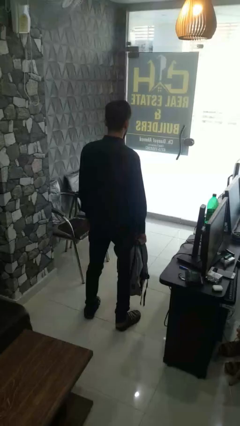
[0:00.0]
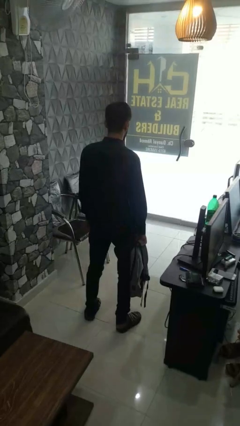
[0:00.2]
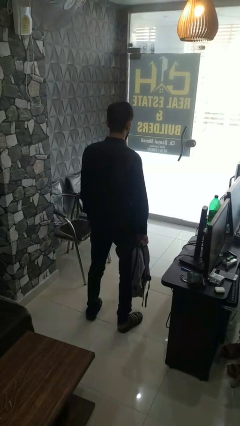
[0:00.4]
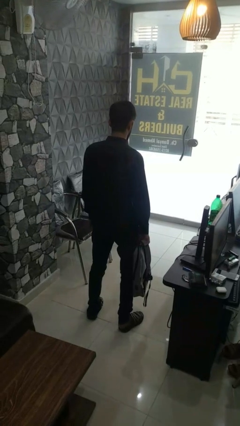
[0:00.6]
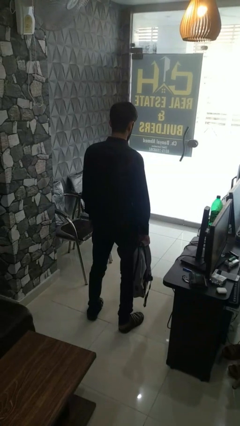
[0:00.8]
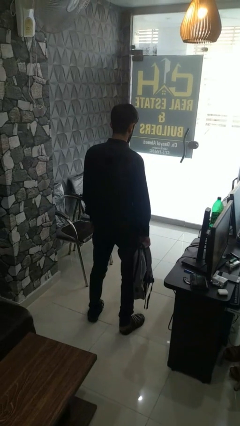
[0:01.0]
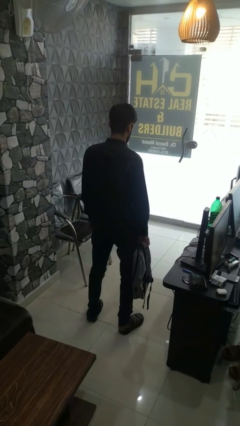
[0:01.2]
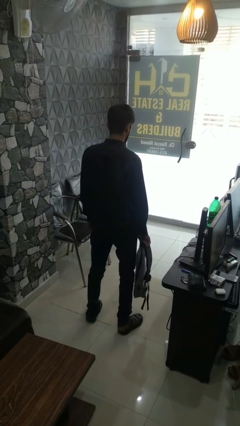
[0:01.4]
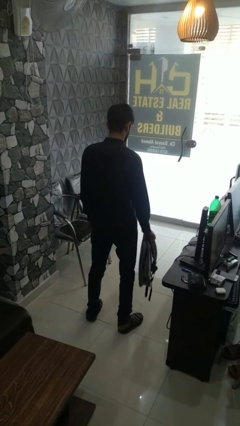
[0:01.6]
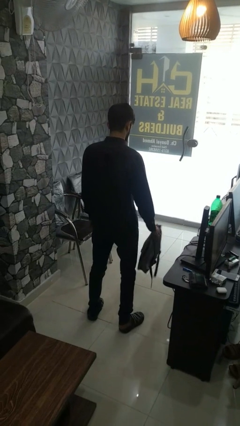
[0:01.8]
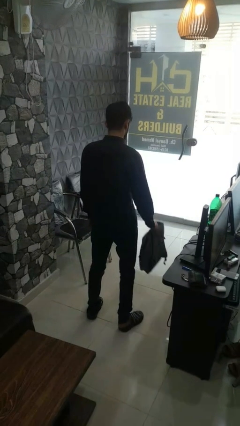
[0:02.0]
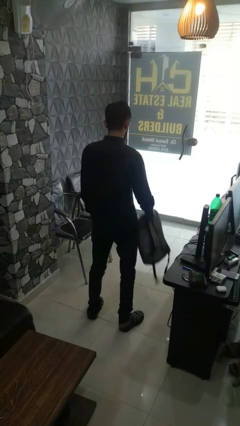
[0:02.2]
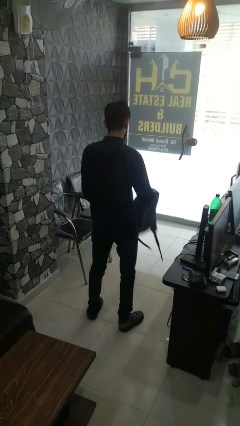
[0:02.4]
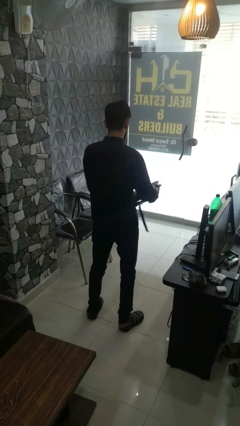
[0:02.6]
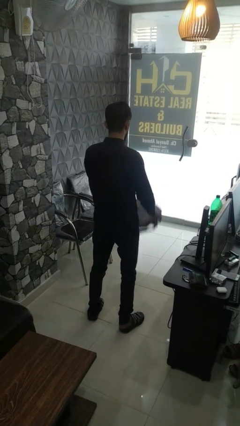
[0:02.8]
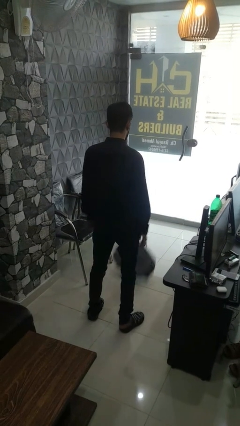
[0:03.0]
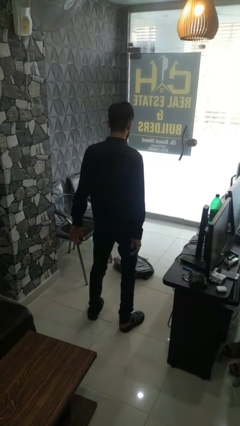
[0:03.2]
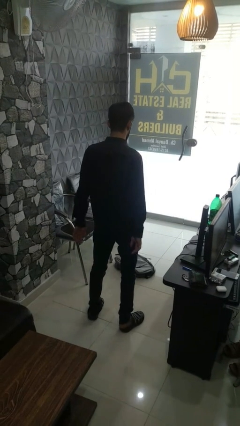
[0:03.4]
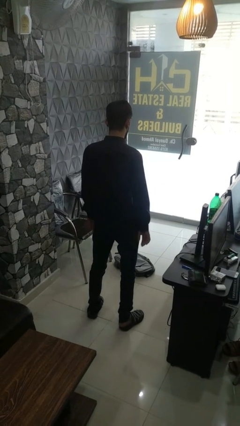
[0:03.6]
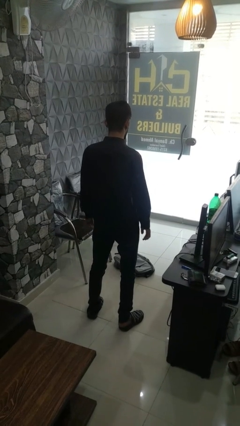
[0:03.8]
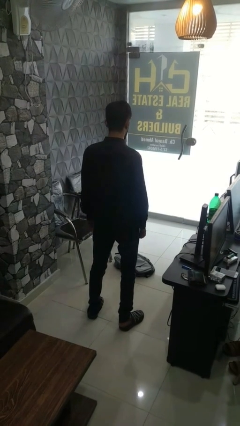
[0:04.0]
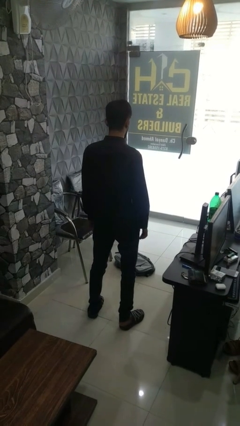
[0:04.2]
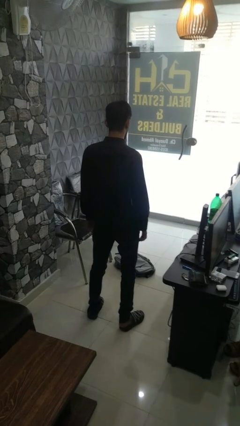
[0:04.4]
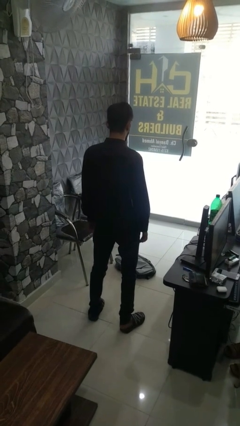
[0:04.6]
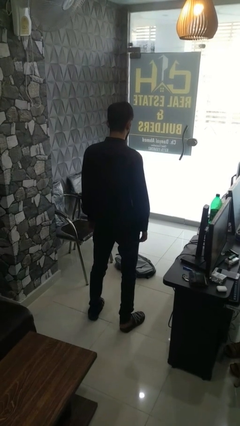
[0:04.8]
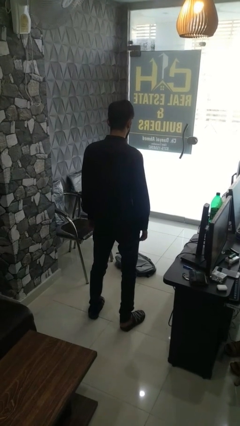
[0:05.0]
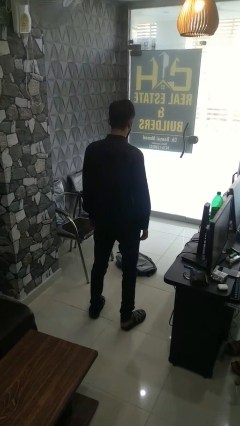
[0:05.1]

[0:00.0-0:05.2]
person throws object into air

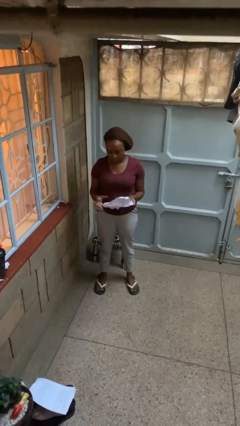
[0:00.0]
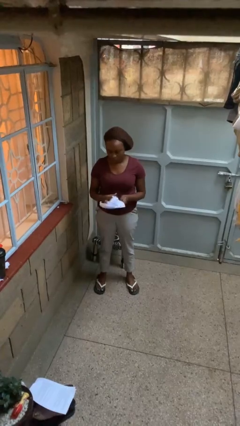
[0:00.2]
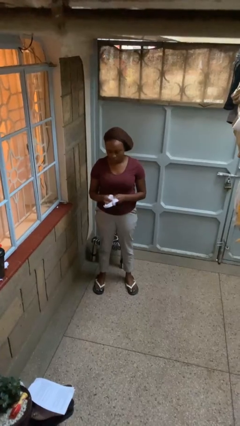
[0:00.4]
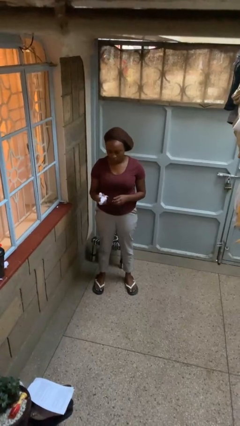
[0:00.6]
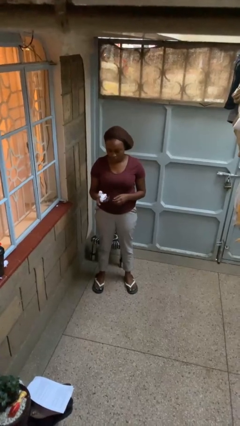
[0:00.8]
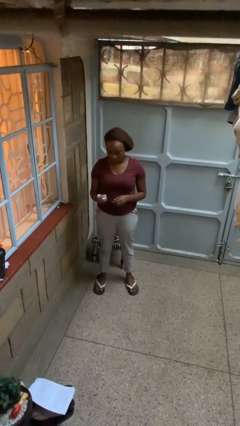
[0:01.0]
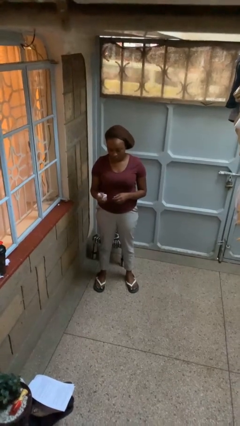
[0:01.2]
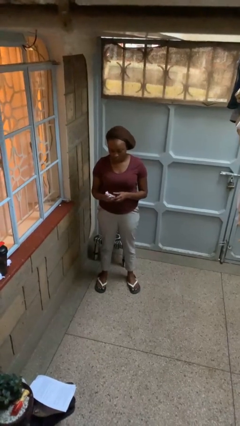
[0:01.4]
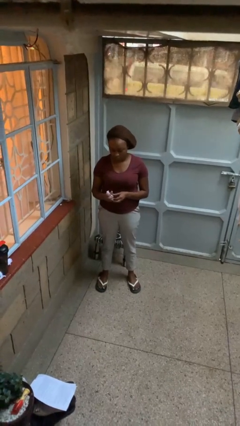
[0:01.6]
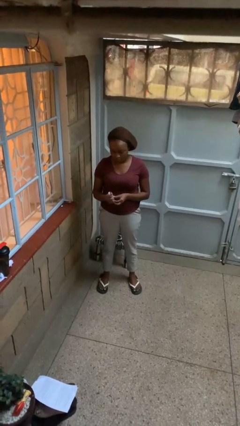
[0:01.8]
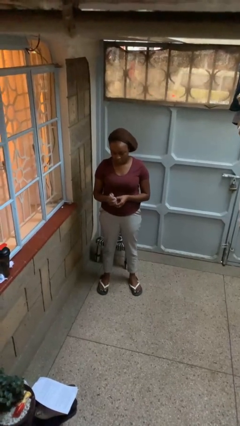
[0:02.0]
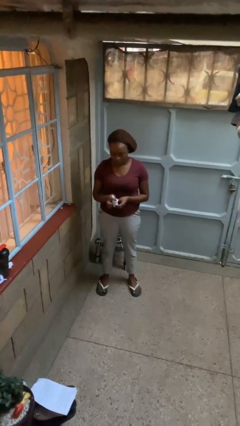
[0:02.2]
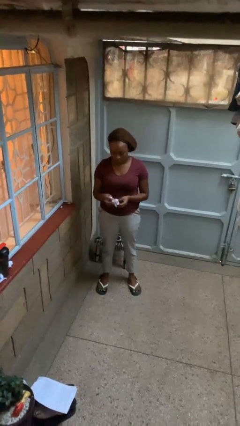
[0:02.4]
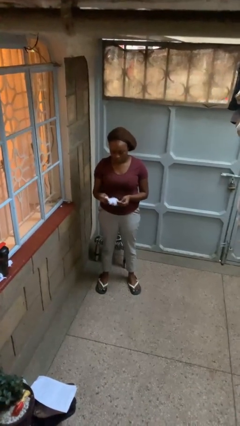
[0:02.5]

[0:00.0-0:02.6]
person crumples paper

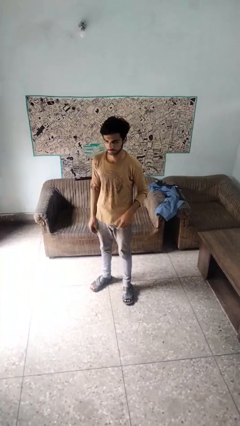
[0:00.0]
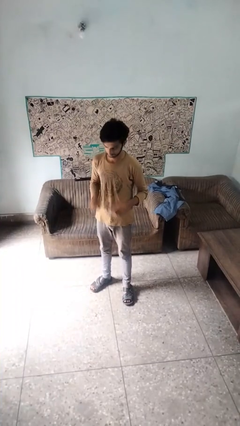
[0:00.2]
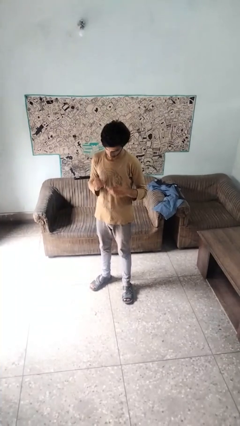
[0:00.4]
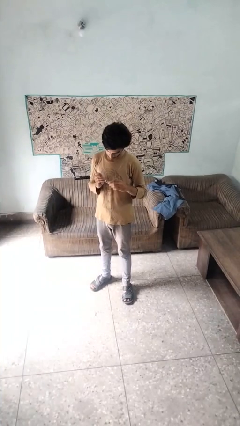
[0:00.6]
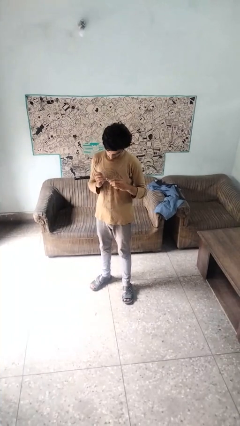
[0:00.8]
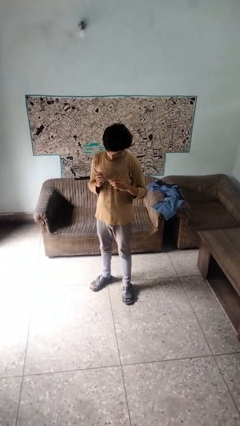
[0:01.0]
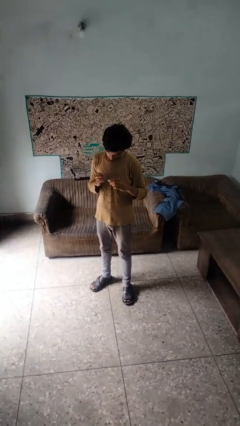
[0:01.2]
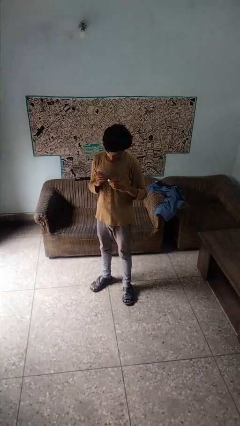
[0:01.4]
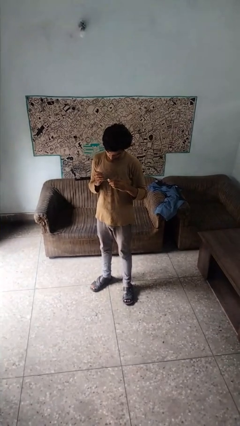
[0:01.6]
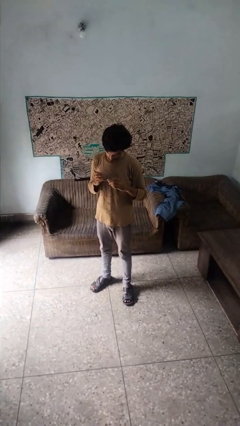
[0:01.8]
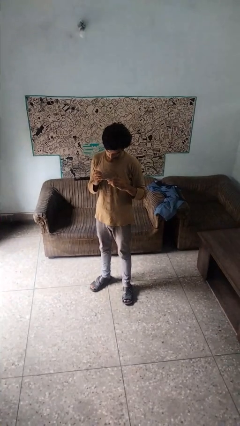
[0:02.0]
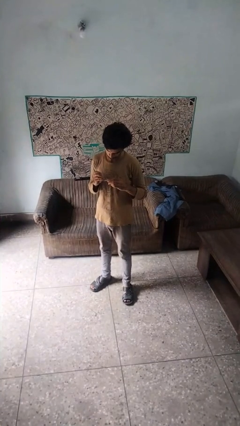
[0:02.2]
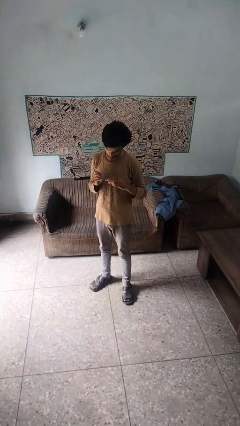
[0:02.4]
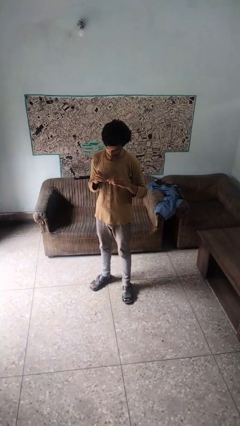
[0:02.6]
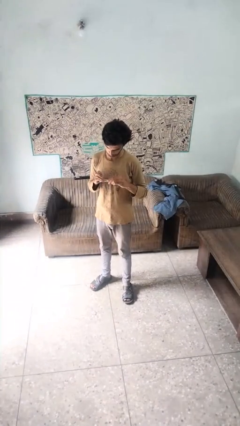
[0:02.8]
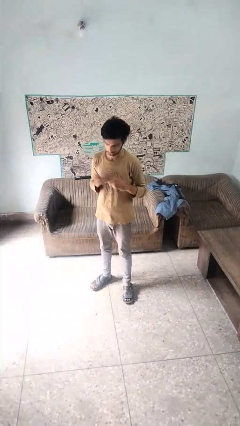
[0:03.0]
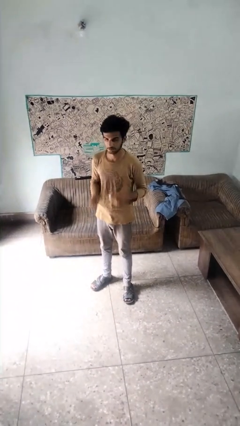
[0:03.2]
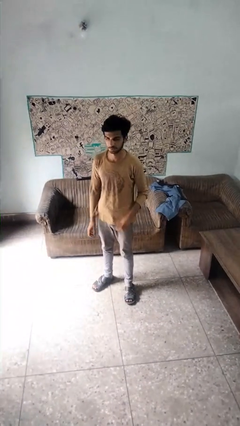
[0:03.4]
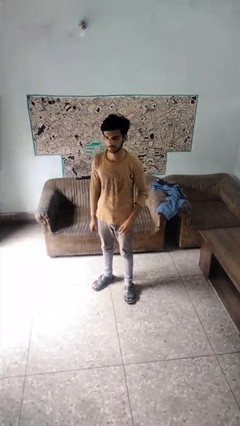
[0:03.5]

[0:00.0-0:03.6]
person clips fingernails

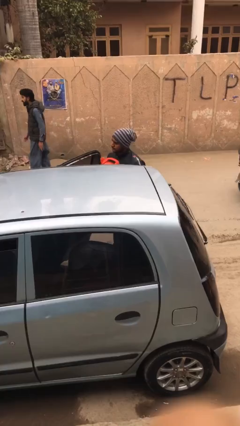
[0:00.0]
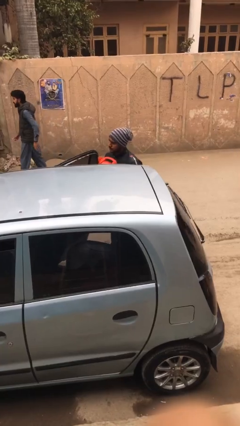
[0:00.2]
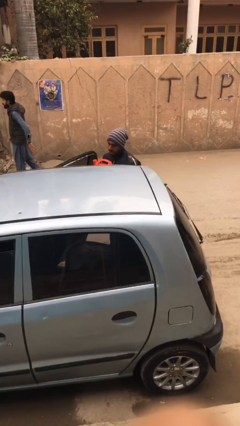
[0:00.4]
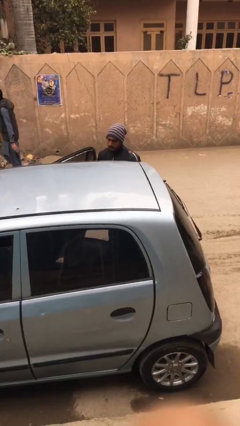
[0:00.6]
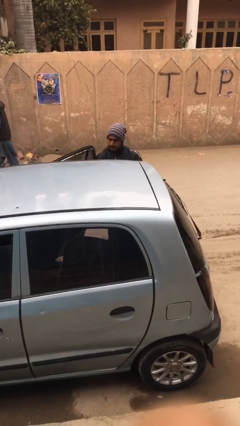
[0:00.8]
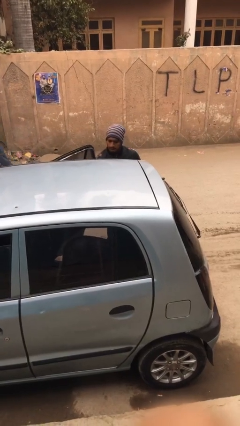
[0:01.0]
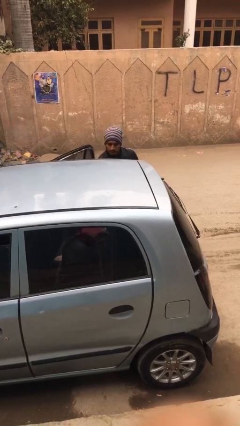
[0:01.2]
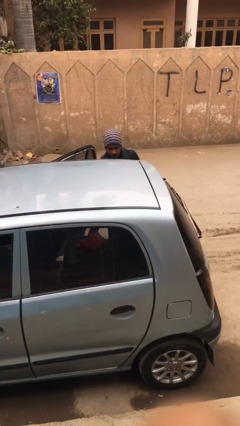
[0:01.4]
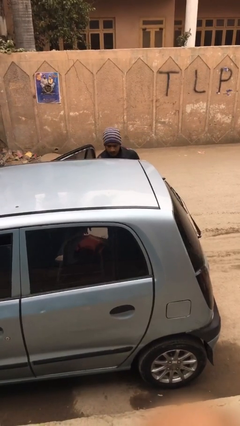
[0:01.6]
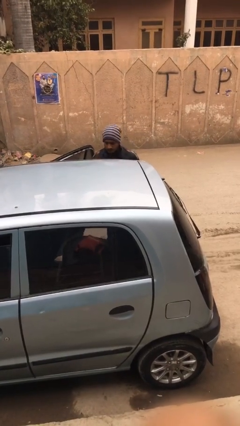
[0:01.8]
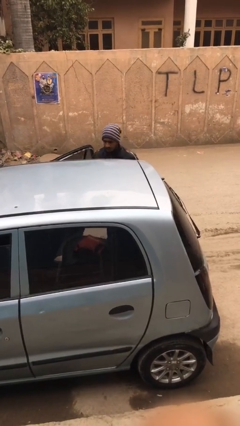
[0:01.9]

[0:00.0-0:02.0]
person loads car

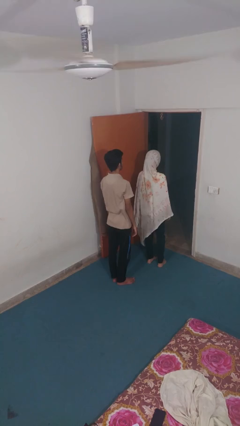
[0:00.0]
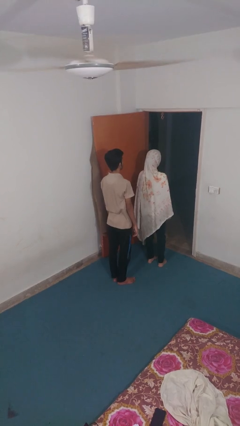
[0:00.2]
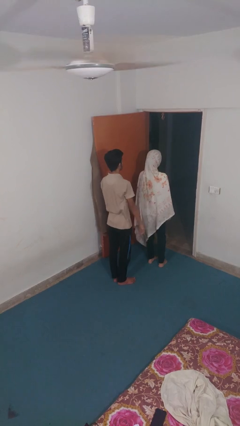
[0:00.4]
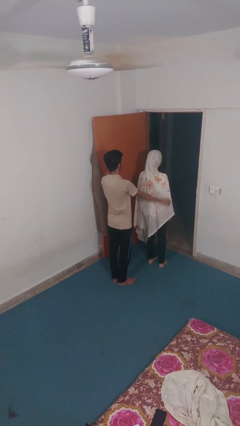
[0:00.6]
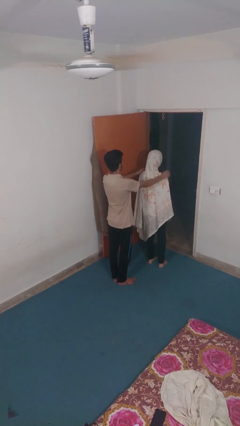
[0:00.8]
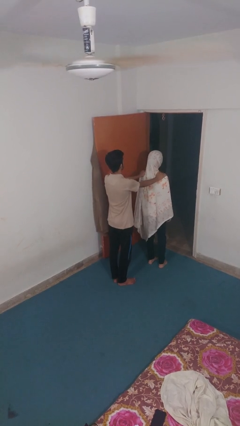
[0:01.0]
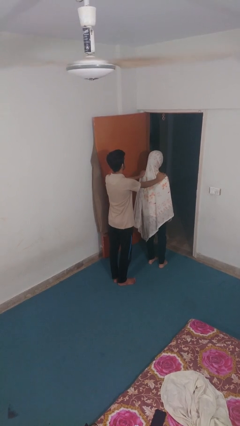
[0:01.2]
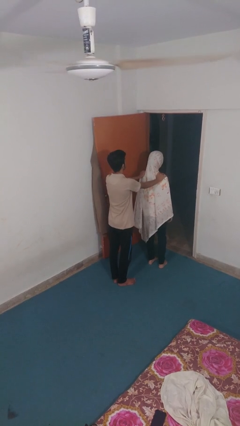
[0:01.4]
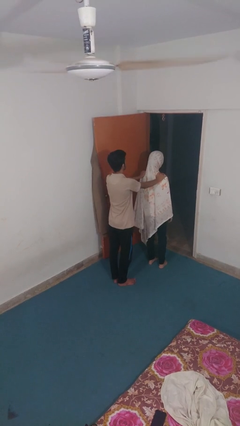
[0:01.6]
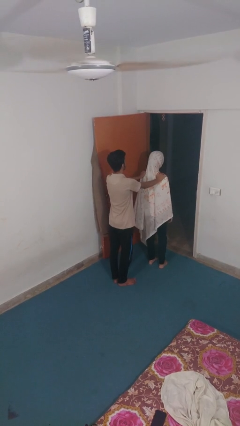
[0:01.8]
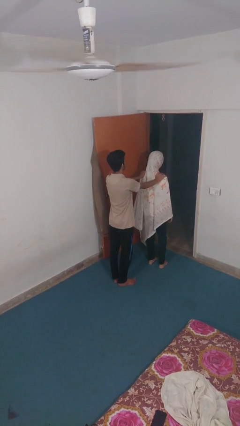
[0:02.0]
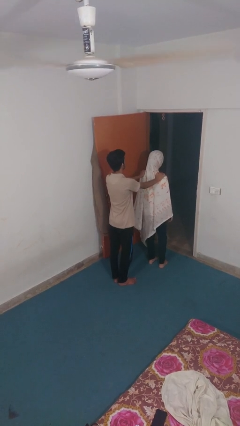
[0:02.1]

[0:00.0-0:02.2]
person grabs person by shoulder

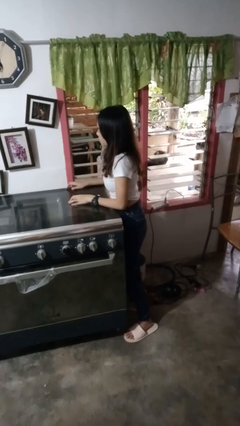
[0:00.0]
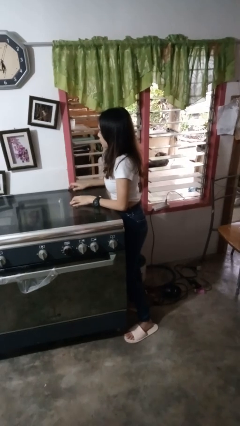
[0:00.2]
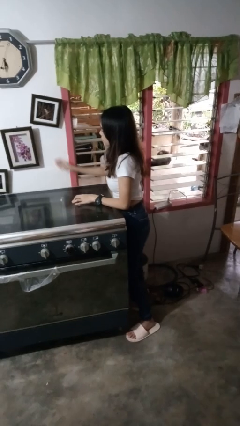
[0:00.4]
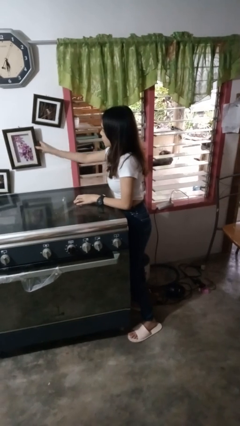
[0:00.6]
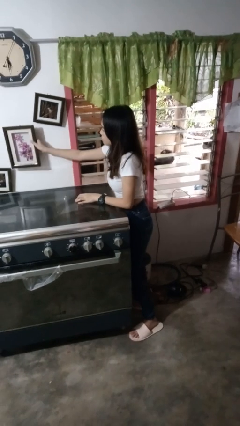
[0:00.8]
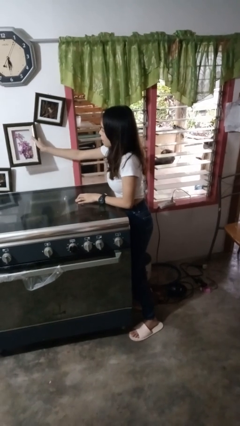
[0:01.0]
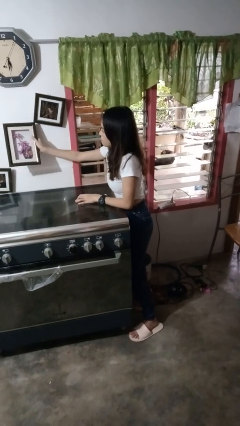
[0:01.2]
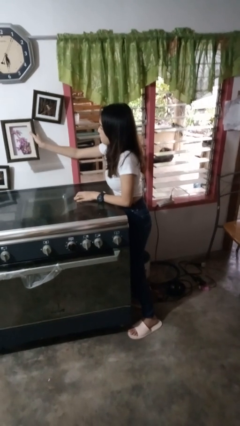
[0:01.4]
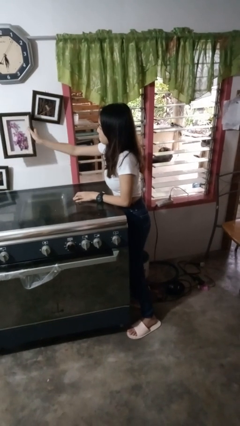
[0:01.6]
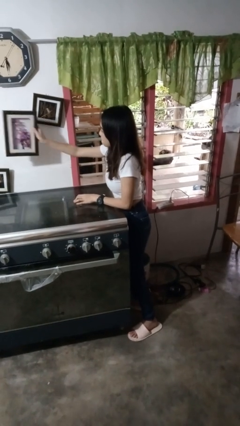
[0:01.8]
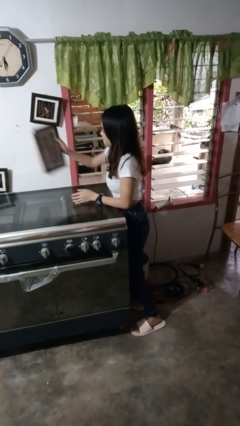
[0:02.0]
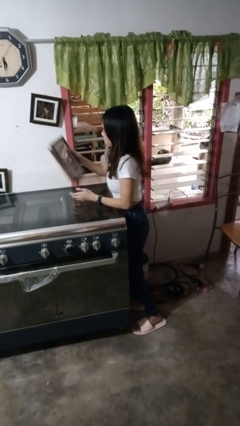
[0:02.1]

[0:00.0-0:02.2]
person takes down picture frame
